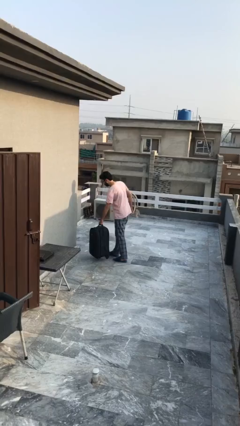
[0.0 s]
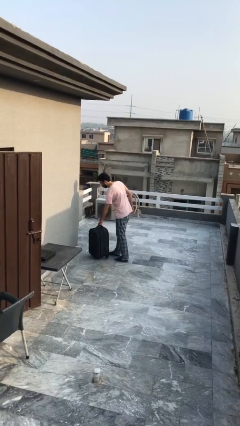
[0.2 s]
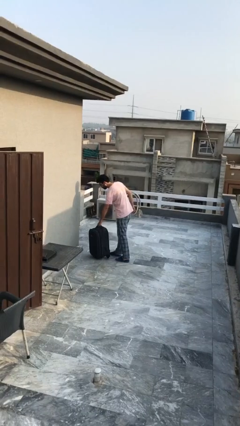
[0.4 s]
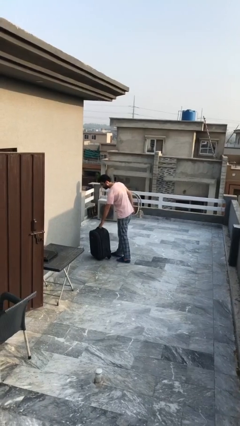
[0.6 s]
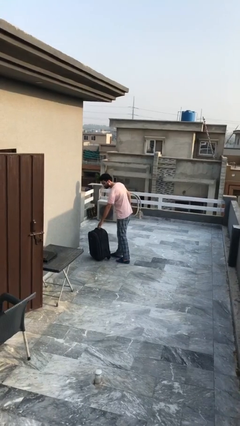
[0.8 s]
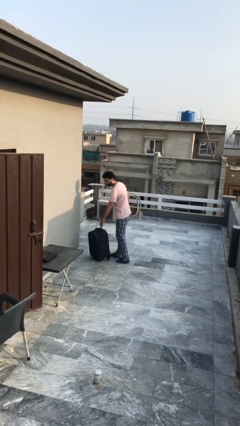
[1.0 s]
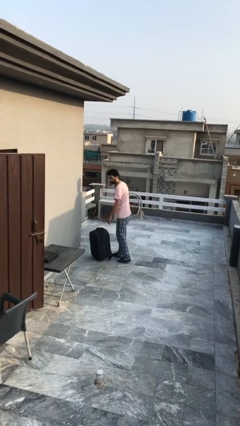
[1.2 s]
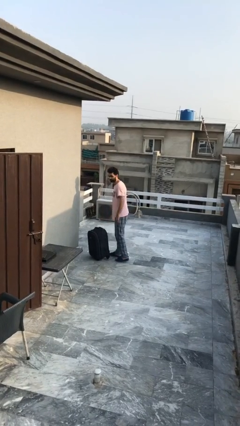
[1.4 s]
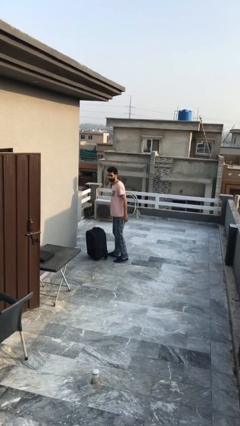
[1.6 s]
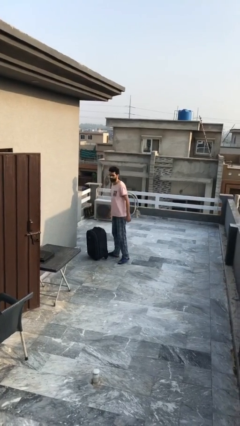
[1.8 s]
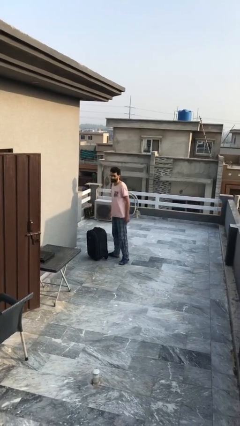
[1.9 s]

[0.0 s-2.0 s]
person puts down object on floor

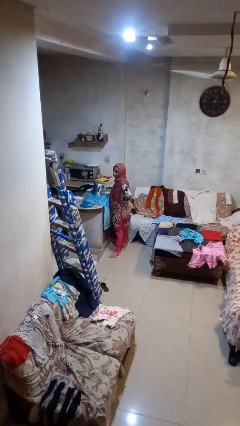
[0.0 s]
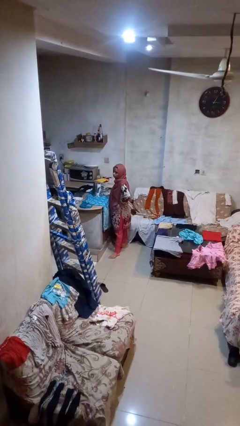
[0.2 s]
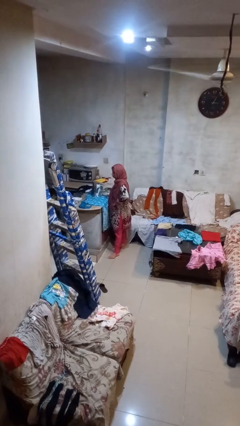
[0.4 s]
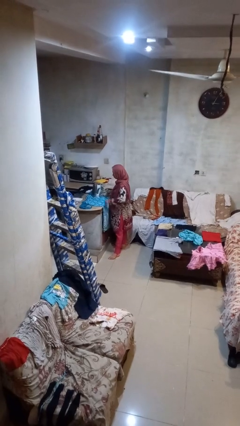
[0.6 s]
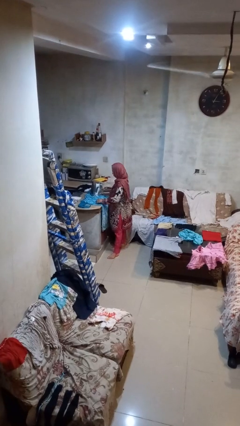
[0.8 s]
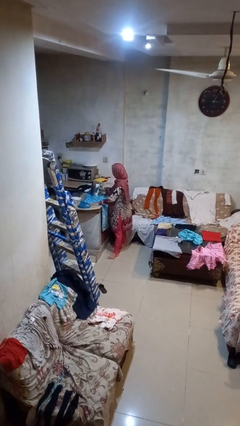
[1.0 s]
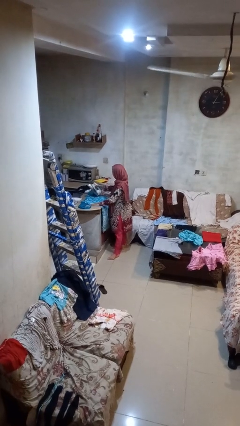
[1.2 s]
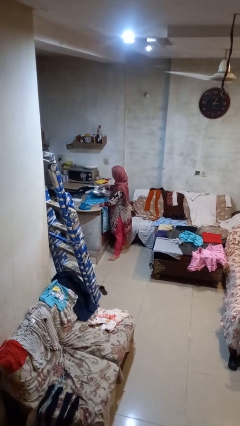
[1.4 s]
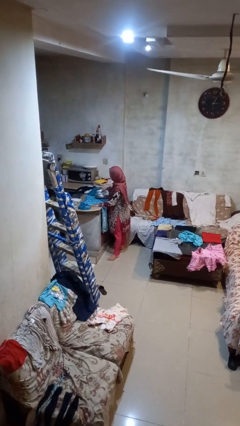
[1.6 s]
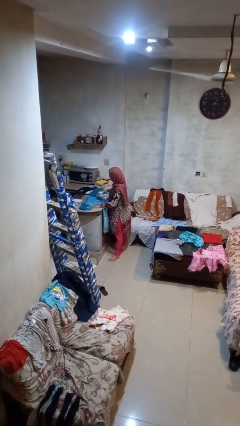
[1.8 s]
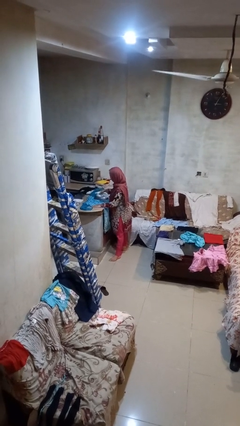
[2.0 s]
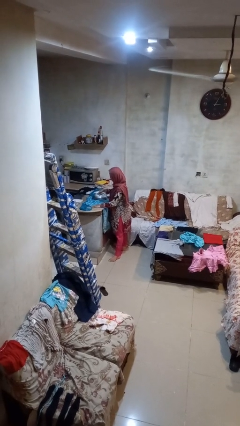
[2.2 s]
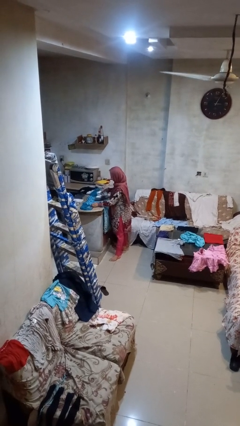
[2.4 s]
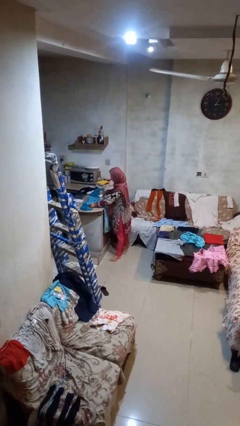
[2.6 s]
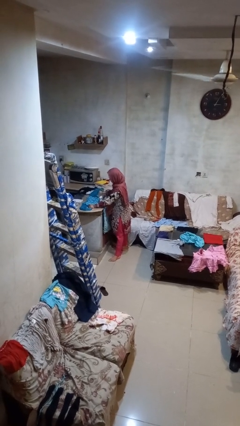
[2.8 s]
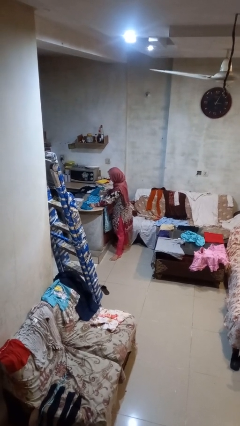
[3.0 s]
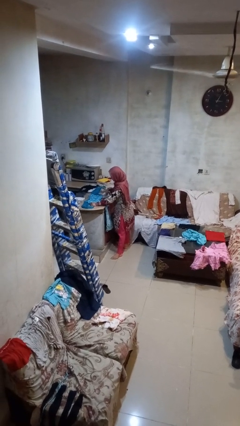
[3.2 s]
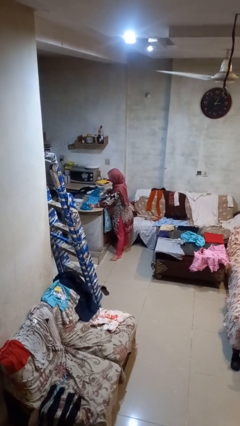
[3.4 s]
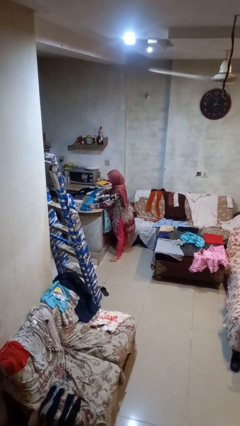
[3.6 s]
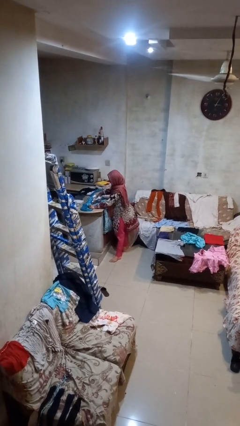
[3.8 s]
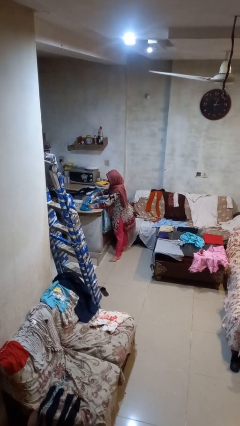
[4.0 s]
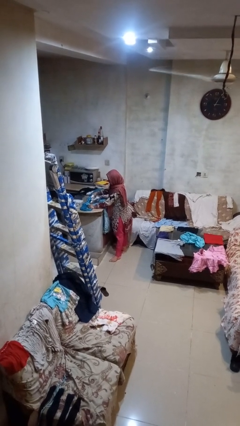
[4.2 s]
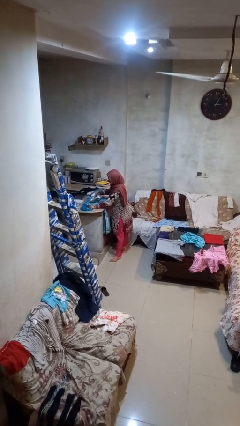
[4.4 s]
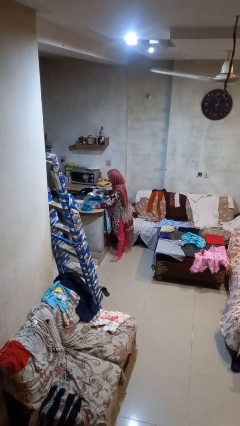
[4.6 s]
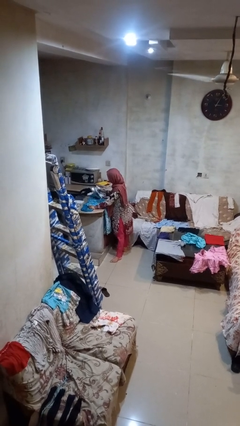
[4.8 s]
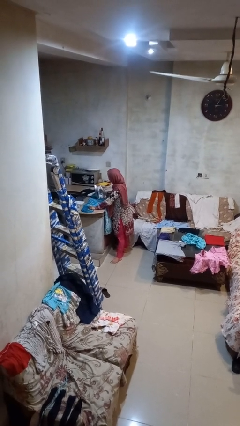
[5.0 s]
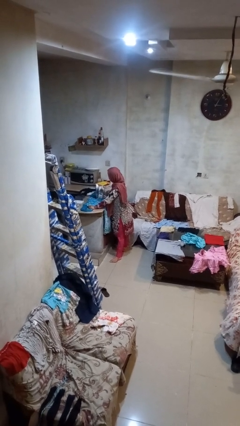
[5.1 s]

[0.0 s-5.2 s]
person irons clothes

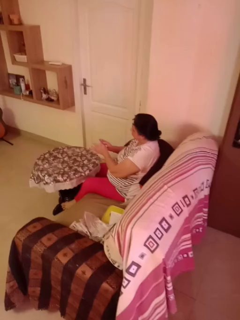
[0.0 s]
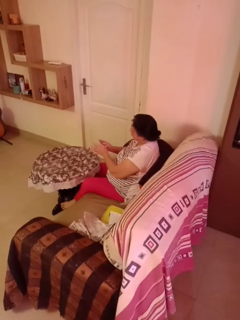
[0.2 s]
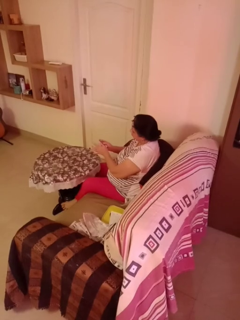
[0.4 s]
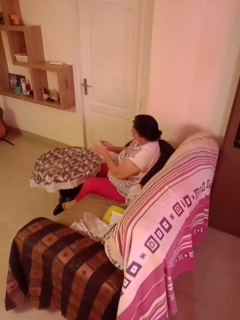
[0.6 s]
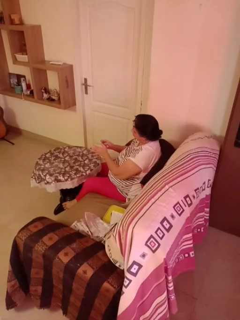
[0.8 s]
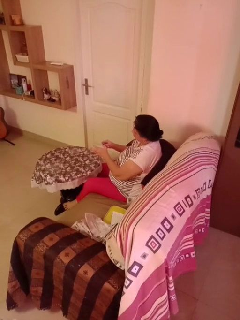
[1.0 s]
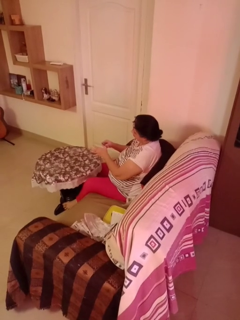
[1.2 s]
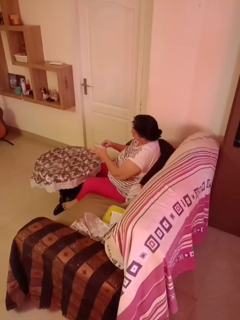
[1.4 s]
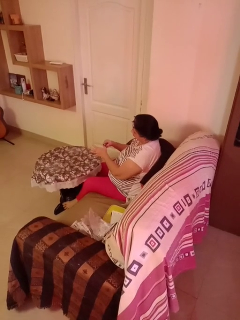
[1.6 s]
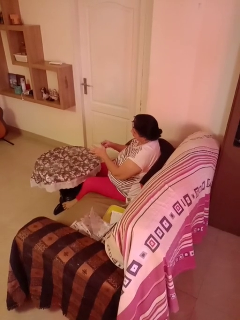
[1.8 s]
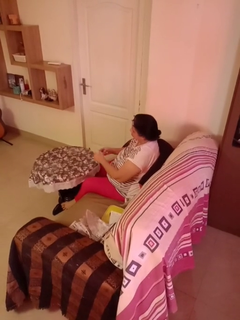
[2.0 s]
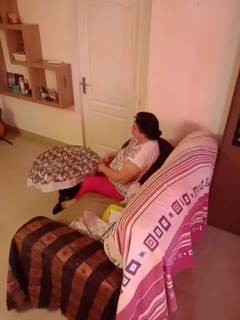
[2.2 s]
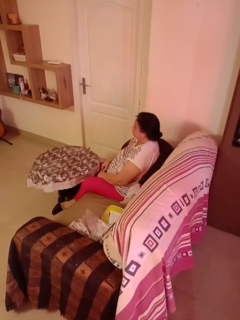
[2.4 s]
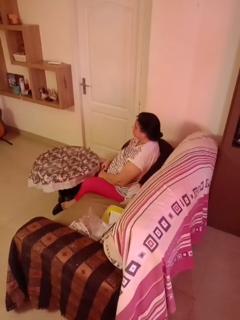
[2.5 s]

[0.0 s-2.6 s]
person files fingernails

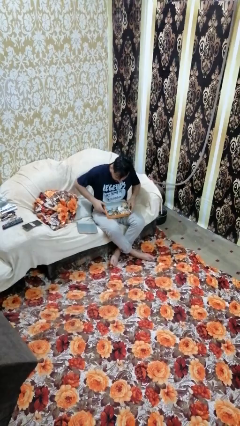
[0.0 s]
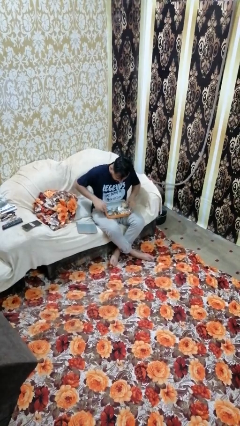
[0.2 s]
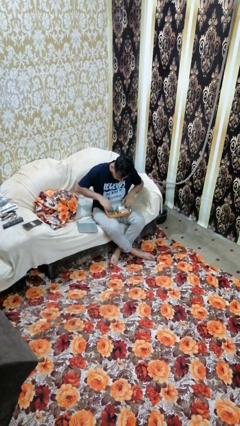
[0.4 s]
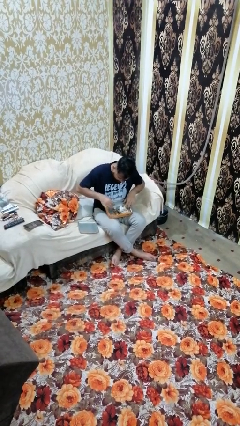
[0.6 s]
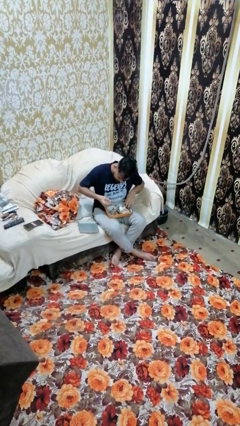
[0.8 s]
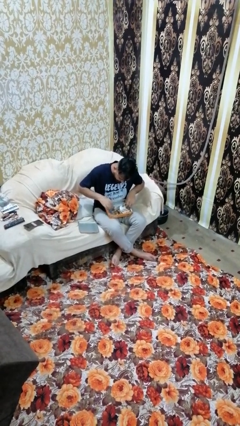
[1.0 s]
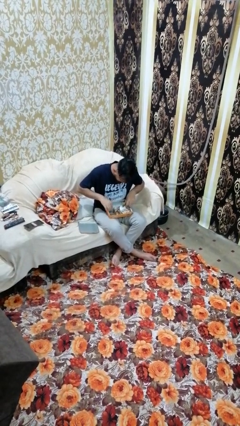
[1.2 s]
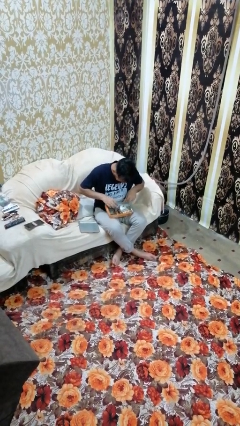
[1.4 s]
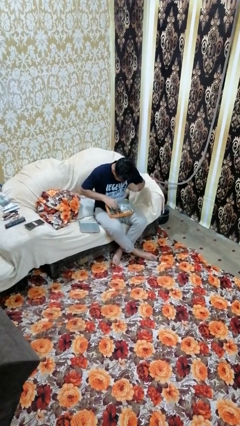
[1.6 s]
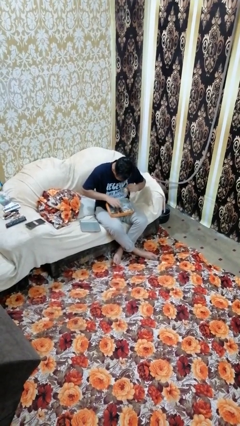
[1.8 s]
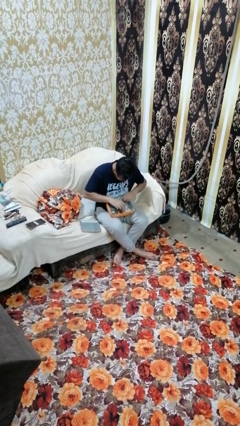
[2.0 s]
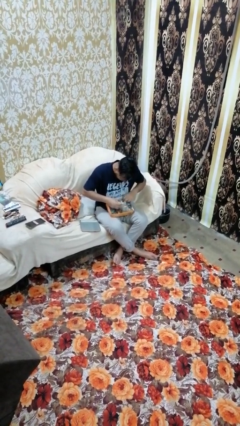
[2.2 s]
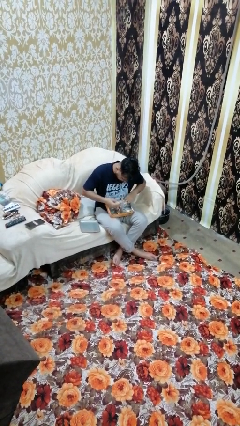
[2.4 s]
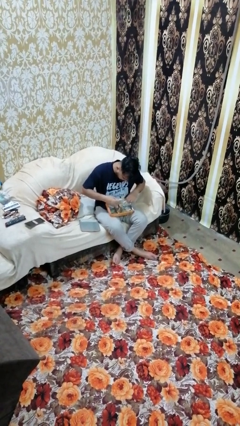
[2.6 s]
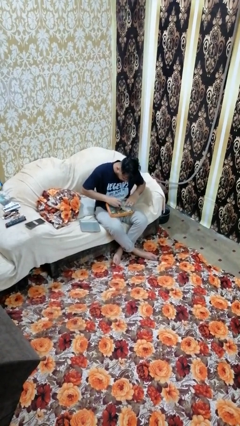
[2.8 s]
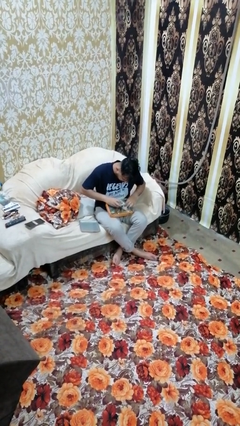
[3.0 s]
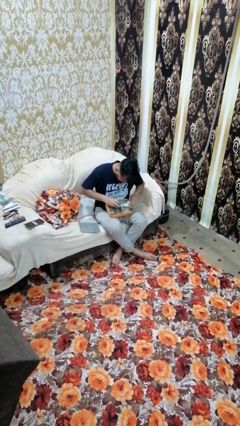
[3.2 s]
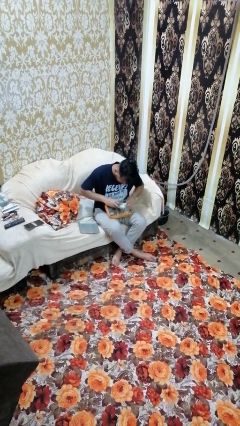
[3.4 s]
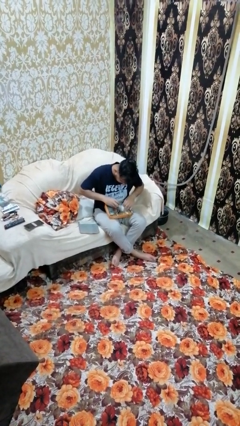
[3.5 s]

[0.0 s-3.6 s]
person searches jewelry box

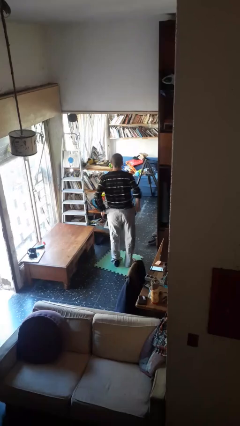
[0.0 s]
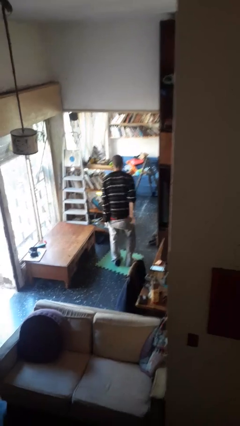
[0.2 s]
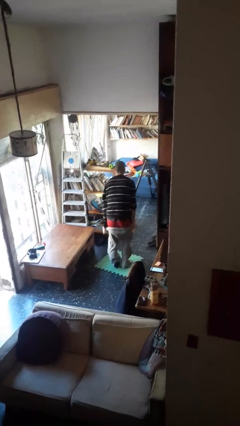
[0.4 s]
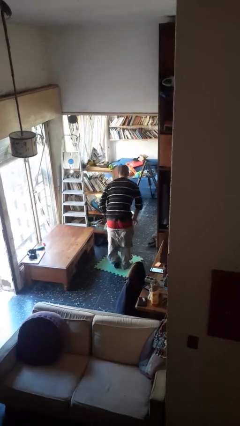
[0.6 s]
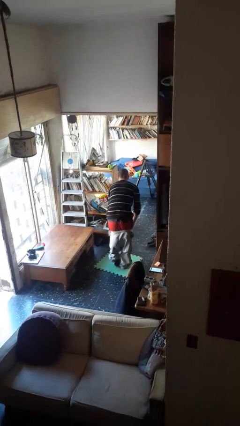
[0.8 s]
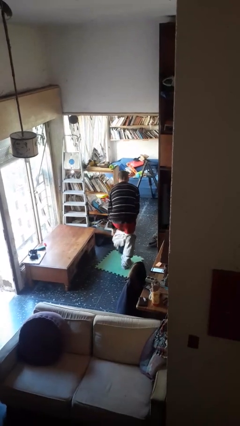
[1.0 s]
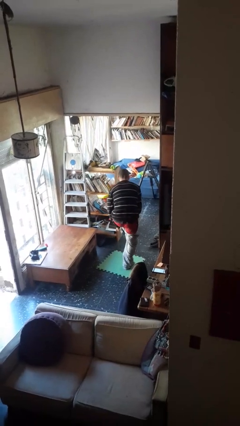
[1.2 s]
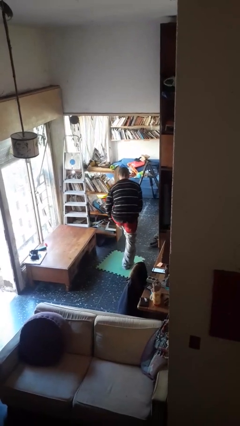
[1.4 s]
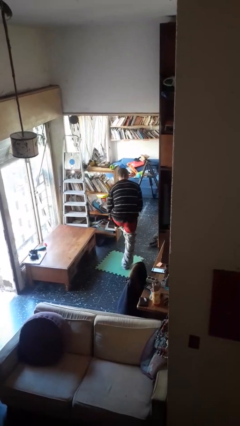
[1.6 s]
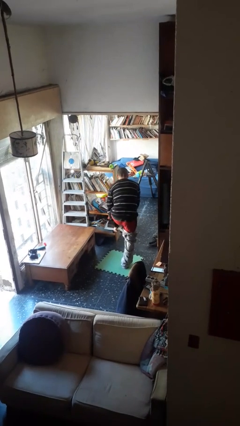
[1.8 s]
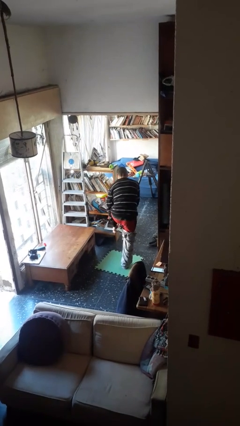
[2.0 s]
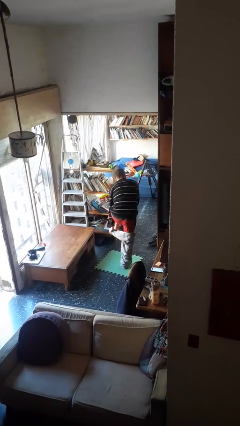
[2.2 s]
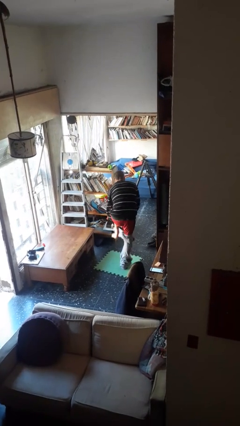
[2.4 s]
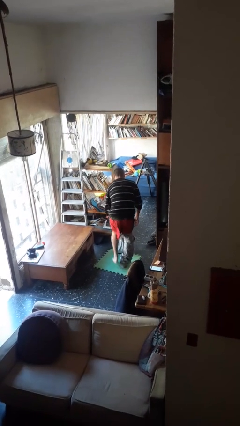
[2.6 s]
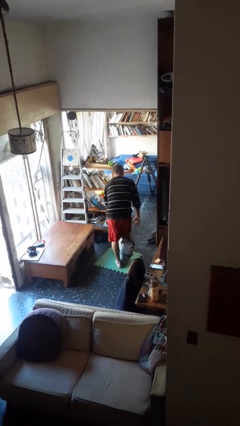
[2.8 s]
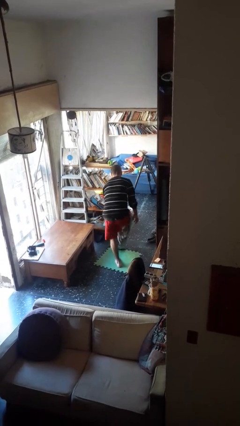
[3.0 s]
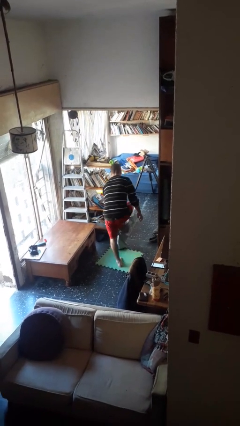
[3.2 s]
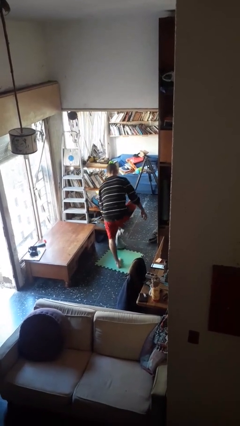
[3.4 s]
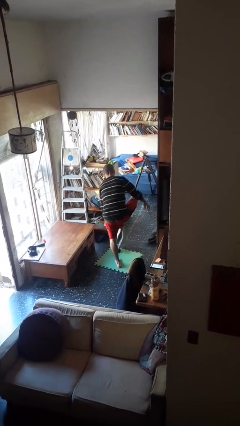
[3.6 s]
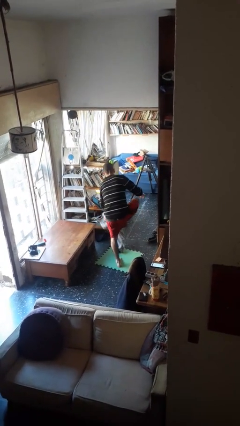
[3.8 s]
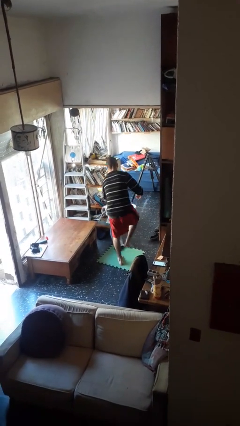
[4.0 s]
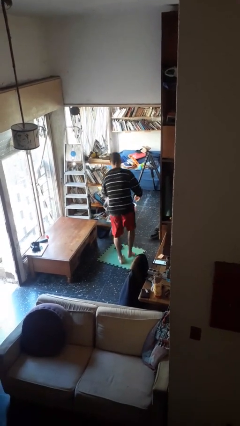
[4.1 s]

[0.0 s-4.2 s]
person takes off pants

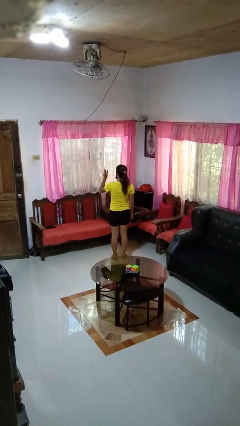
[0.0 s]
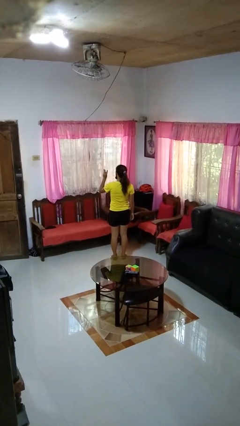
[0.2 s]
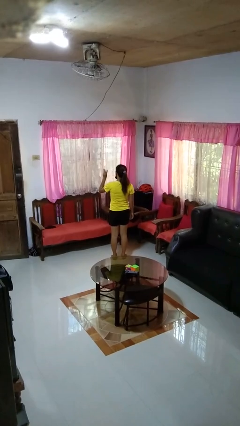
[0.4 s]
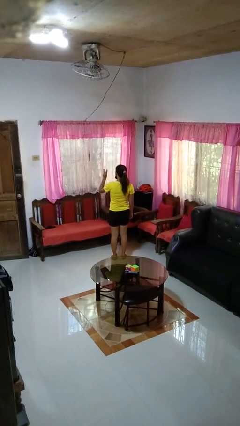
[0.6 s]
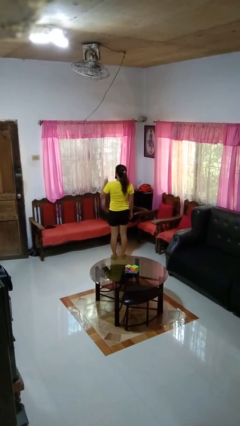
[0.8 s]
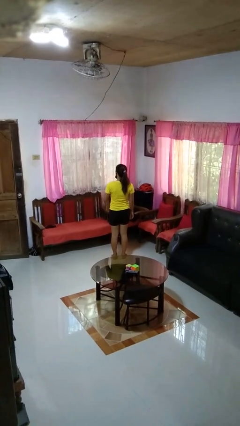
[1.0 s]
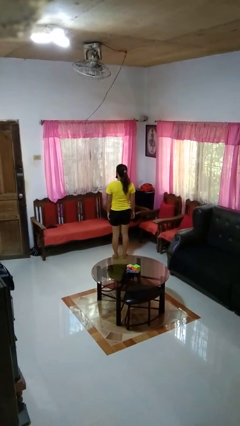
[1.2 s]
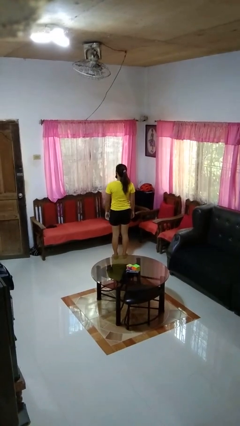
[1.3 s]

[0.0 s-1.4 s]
person gestures number three
